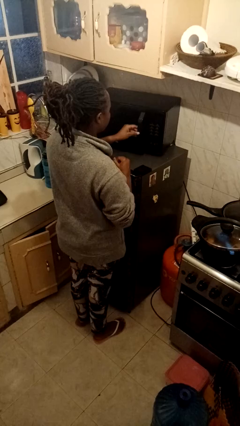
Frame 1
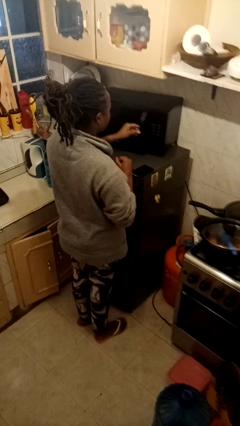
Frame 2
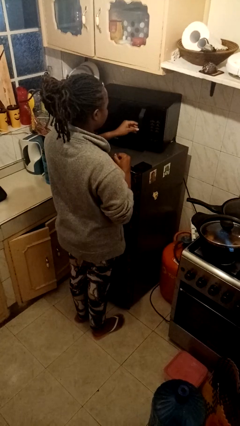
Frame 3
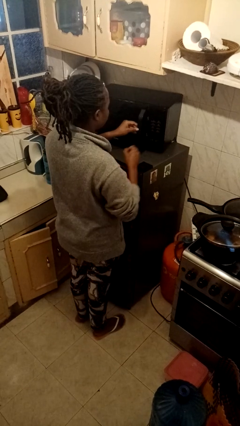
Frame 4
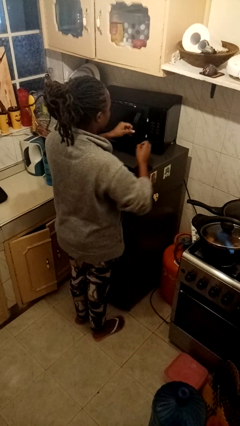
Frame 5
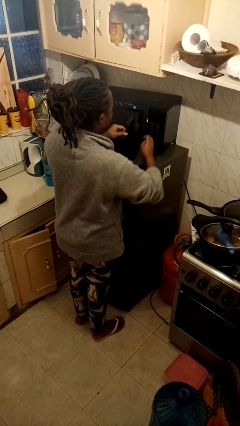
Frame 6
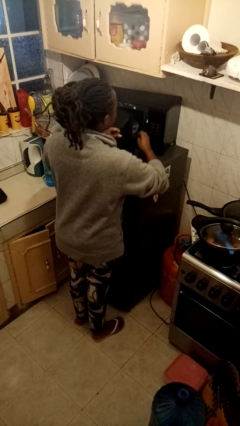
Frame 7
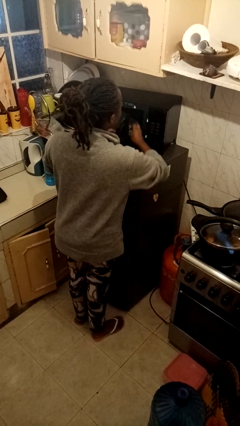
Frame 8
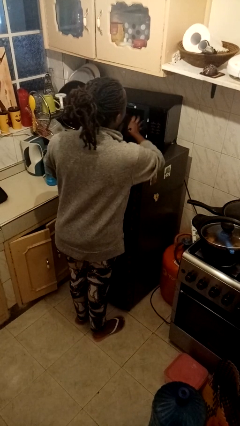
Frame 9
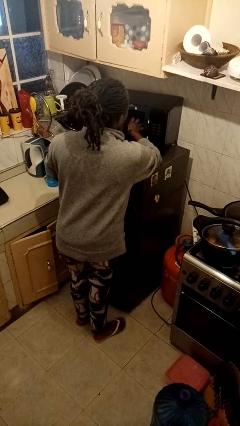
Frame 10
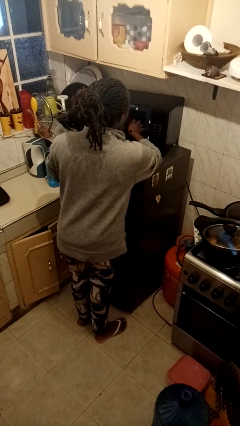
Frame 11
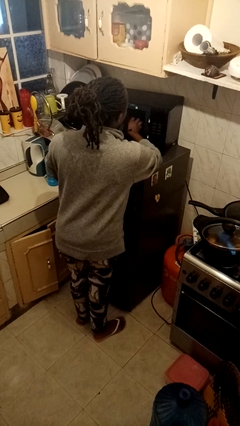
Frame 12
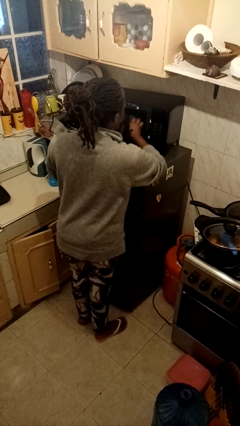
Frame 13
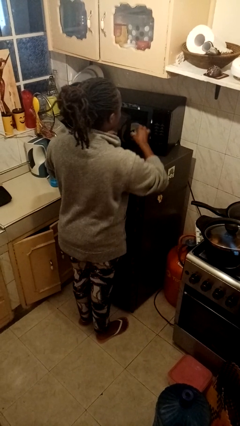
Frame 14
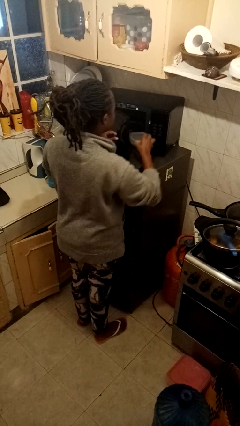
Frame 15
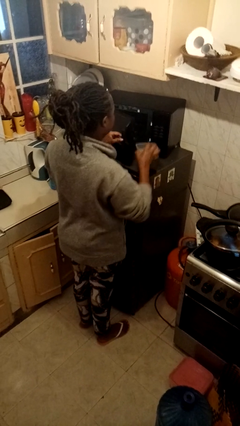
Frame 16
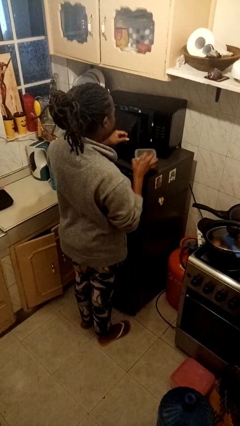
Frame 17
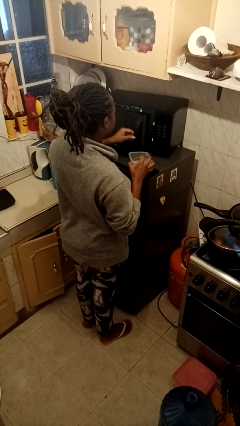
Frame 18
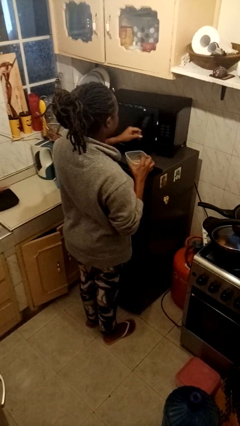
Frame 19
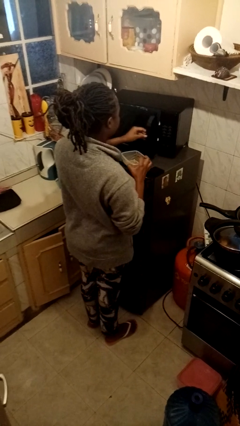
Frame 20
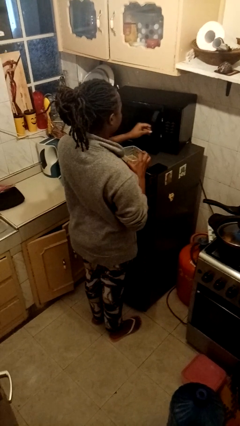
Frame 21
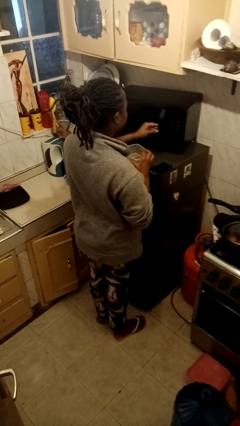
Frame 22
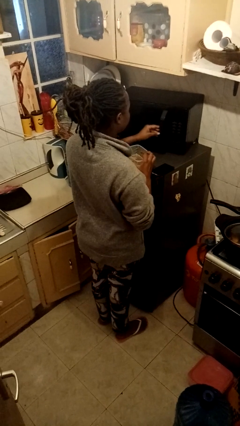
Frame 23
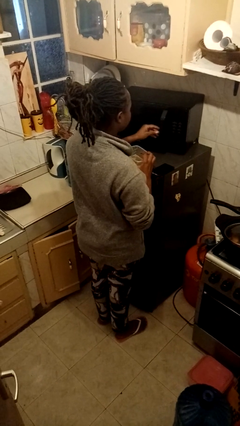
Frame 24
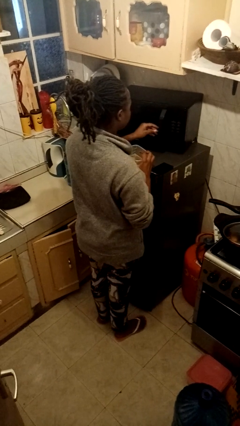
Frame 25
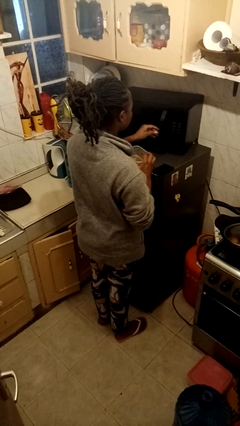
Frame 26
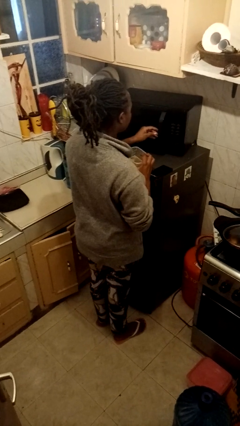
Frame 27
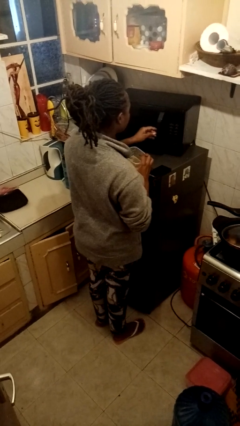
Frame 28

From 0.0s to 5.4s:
person takes object from microwave

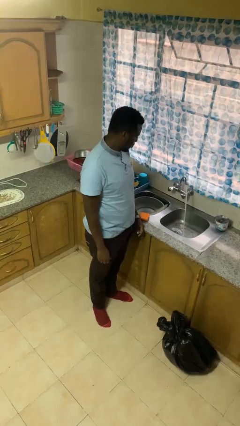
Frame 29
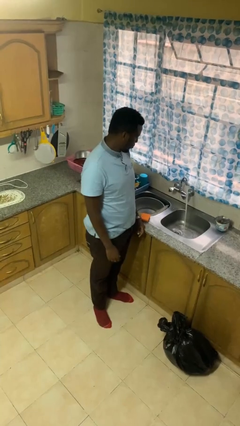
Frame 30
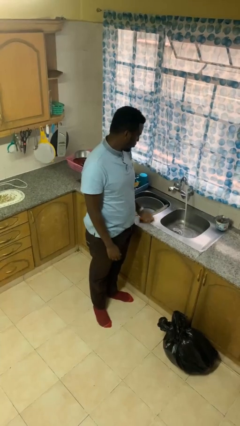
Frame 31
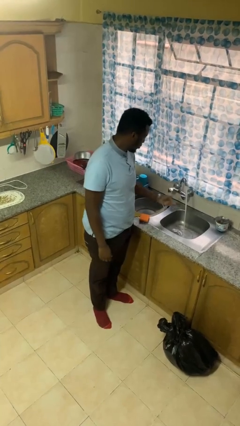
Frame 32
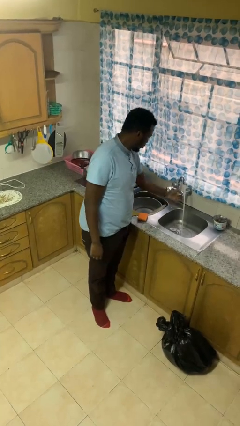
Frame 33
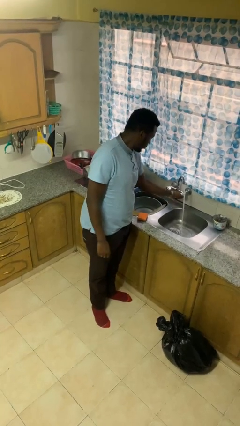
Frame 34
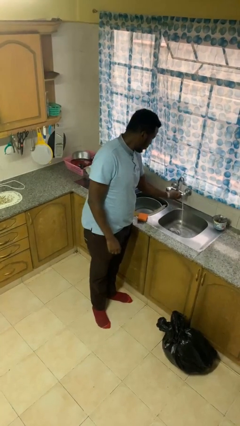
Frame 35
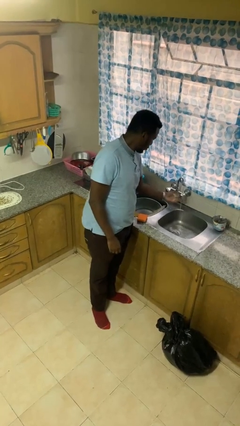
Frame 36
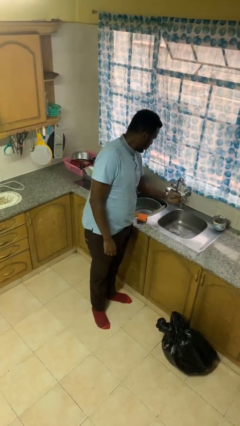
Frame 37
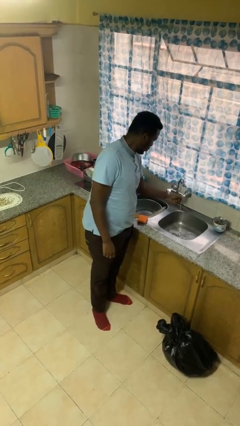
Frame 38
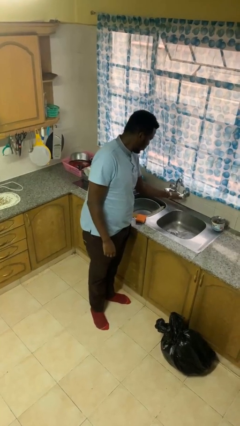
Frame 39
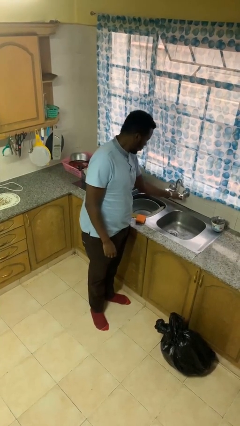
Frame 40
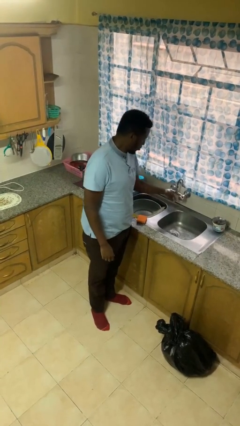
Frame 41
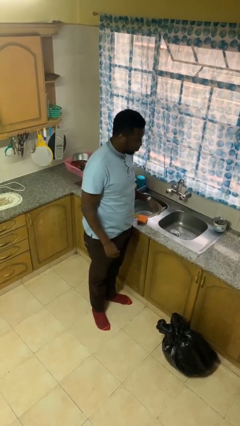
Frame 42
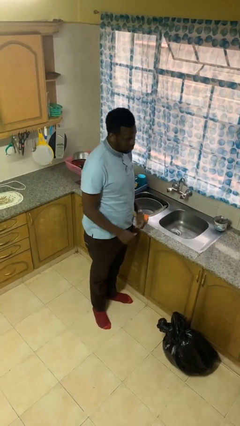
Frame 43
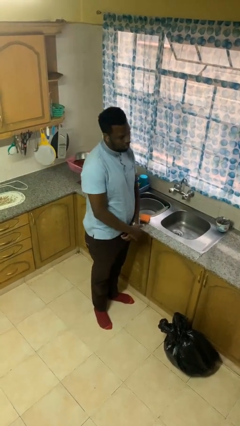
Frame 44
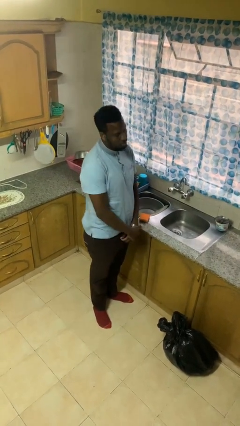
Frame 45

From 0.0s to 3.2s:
person turns off faucet

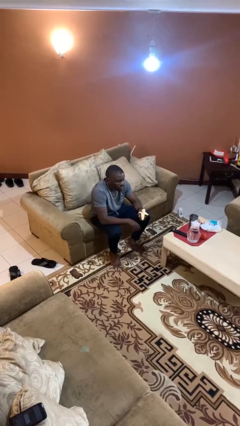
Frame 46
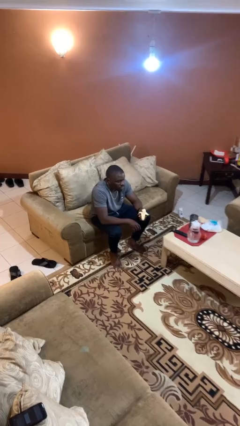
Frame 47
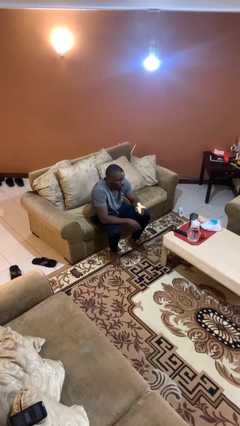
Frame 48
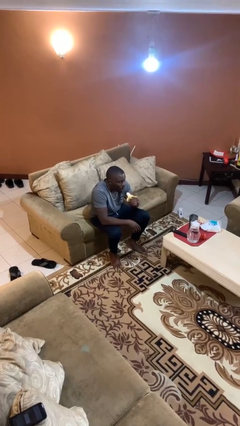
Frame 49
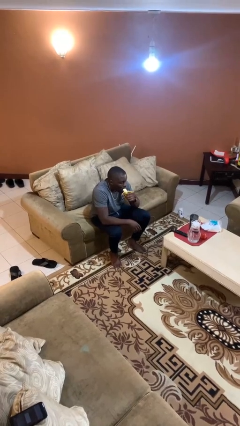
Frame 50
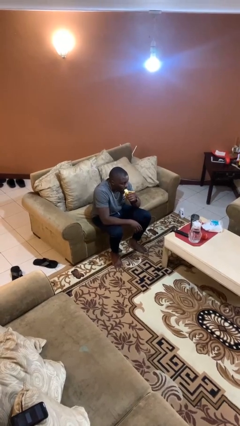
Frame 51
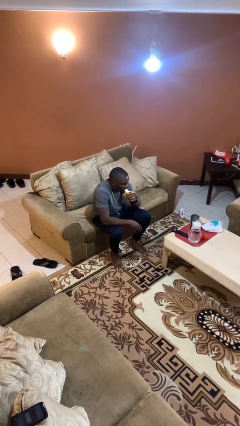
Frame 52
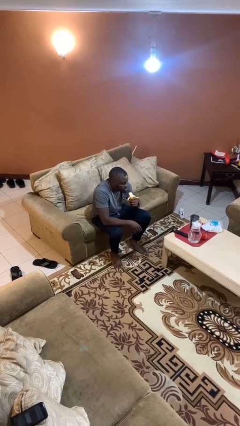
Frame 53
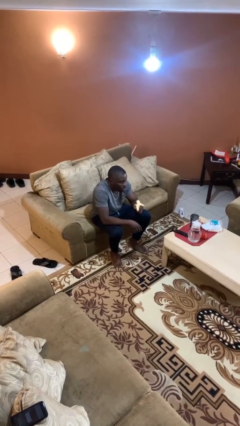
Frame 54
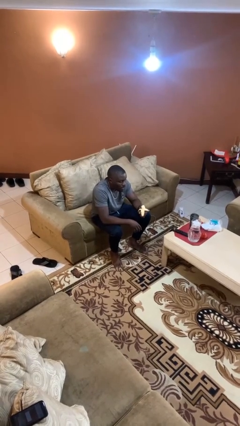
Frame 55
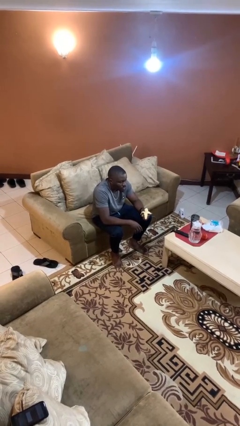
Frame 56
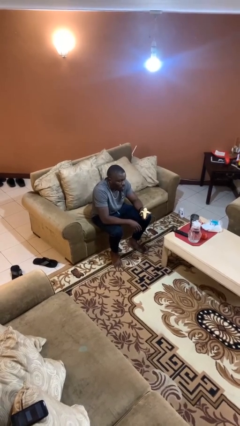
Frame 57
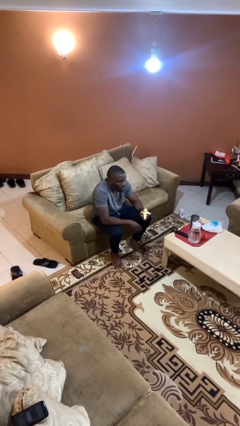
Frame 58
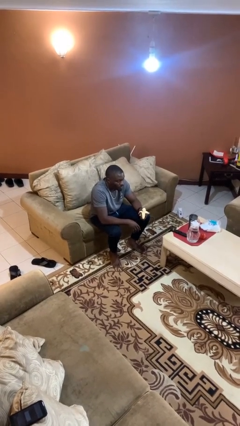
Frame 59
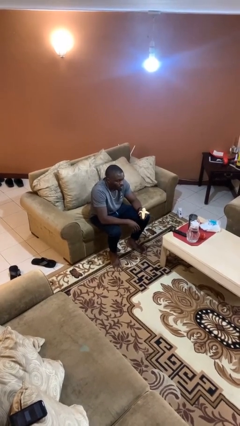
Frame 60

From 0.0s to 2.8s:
person eats banana

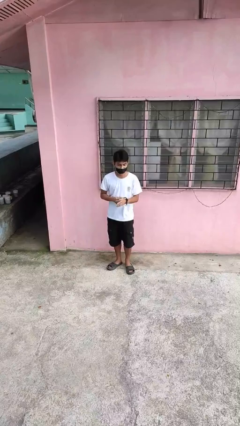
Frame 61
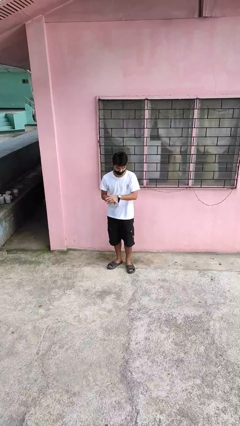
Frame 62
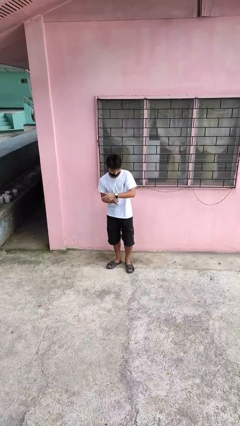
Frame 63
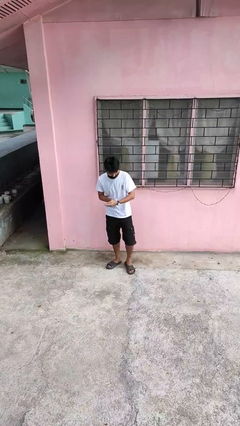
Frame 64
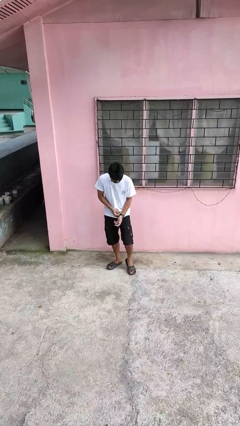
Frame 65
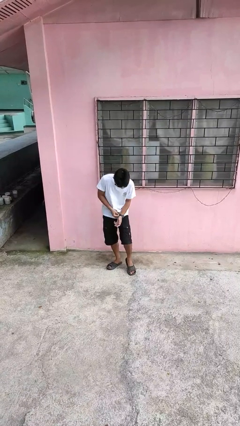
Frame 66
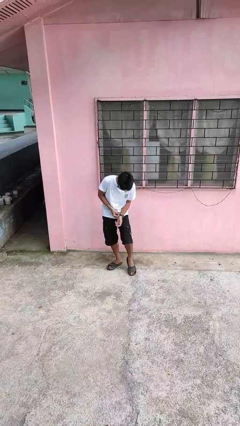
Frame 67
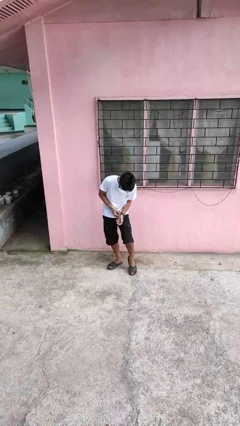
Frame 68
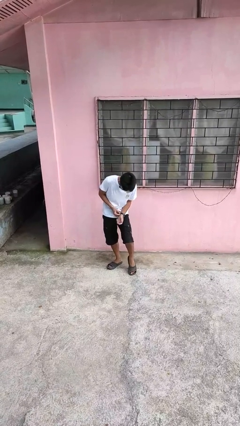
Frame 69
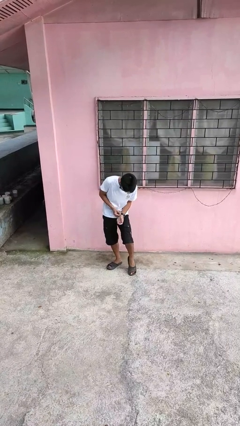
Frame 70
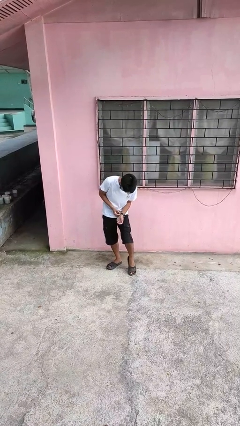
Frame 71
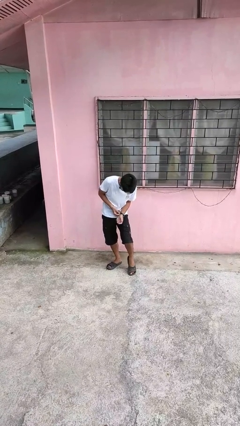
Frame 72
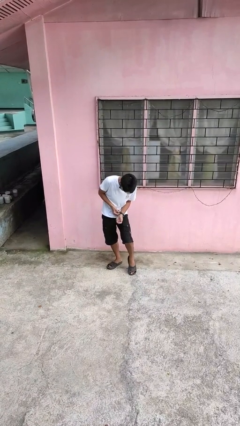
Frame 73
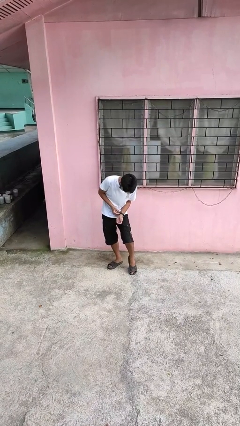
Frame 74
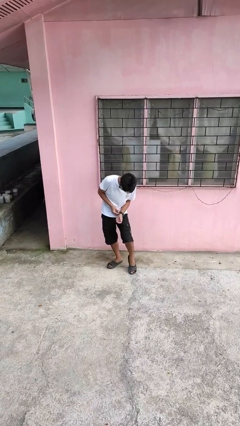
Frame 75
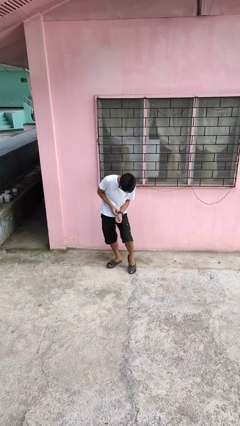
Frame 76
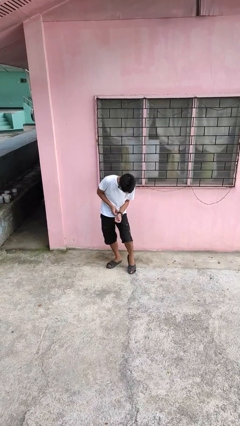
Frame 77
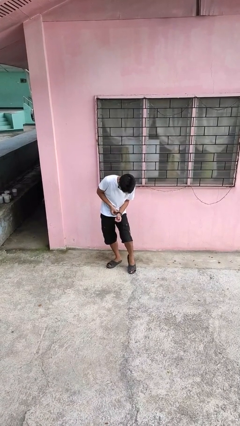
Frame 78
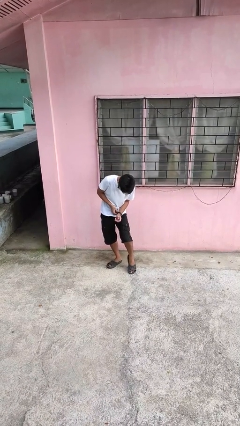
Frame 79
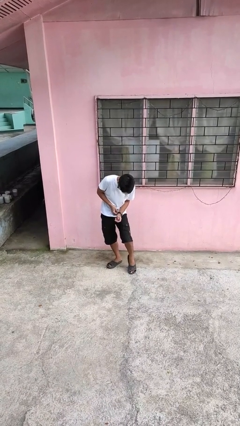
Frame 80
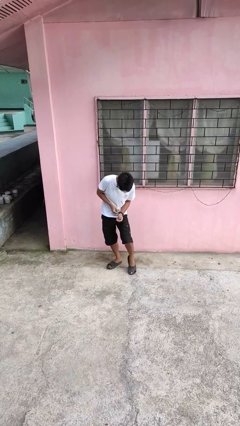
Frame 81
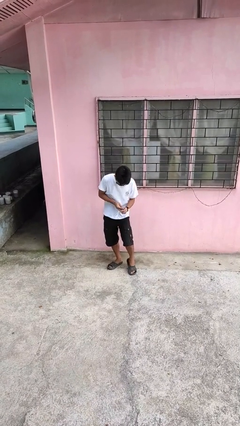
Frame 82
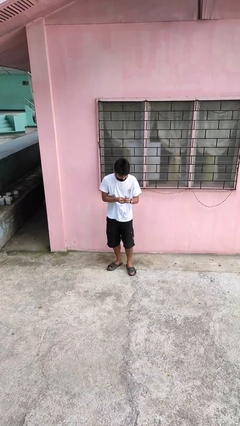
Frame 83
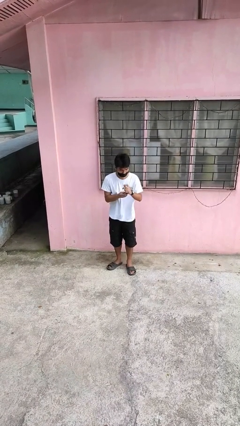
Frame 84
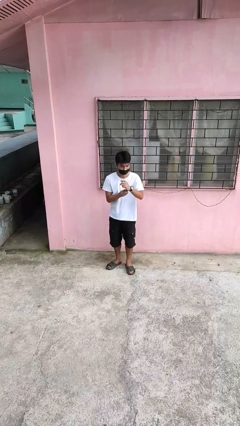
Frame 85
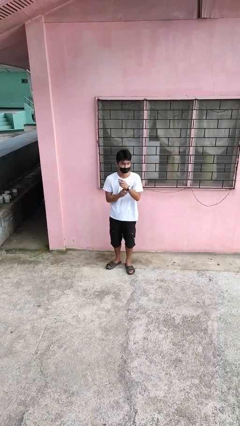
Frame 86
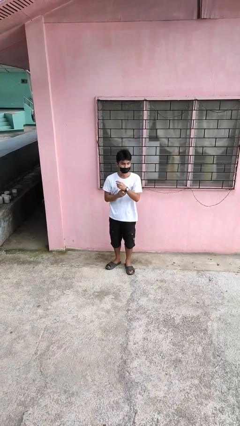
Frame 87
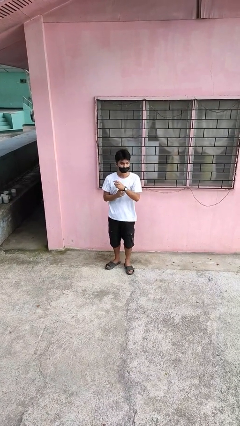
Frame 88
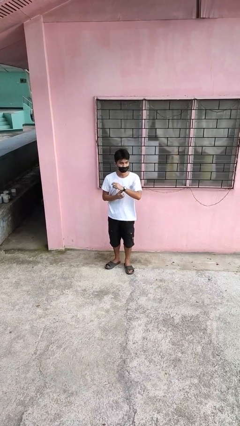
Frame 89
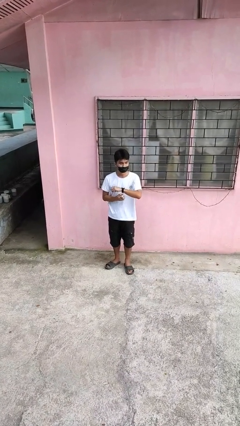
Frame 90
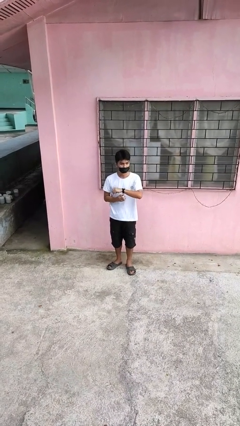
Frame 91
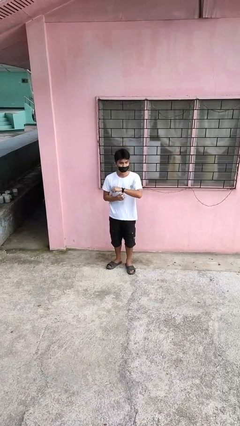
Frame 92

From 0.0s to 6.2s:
person puts on wristwatch

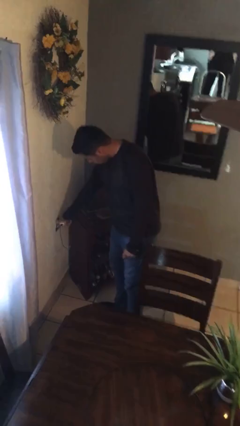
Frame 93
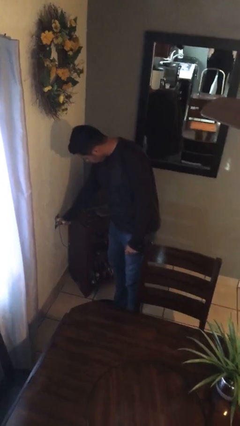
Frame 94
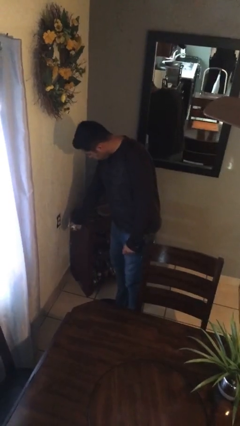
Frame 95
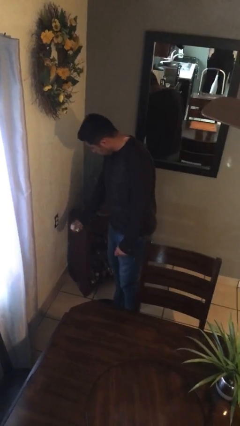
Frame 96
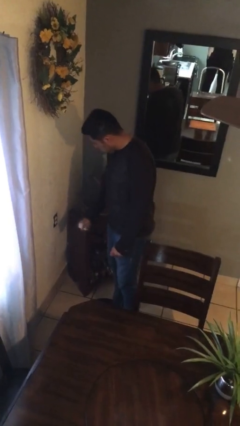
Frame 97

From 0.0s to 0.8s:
person pulls wheeled trashcan
